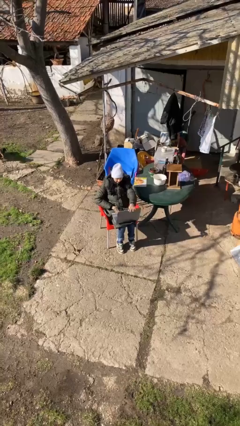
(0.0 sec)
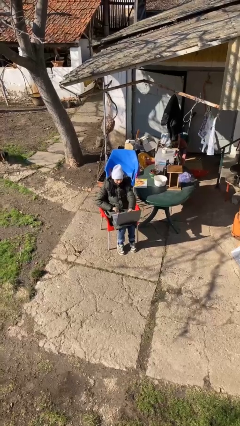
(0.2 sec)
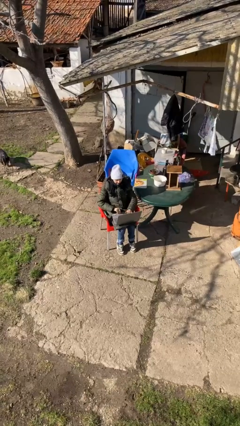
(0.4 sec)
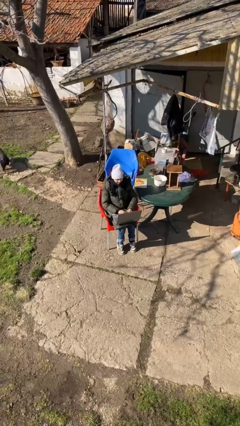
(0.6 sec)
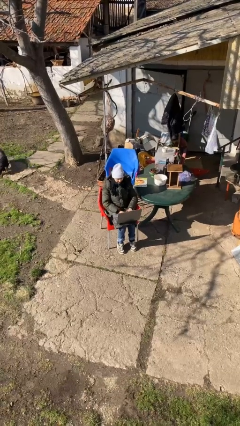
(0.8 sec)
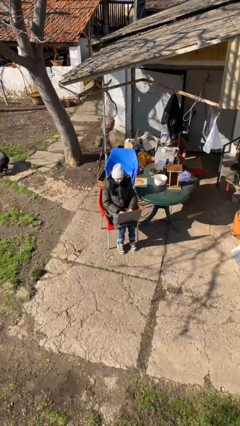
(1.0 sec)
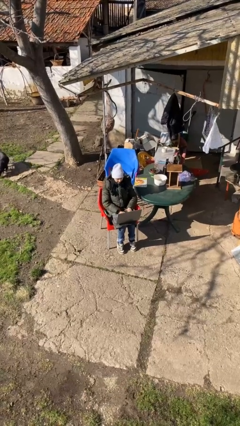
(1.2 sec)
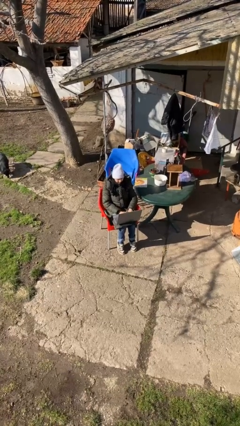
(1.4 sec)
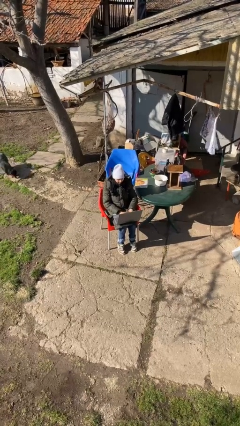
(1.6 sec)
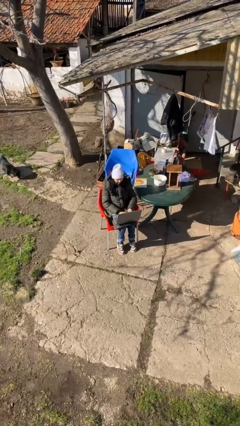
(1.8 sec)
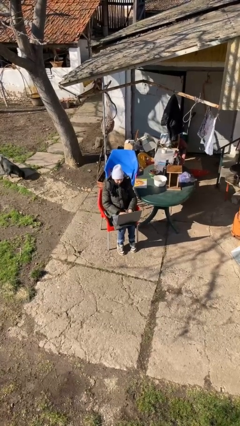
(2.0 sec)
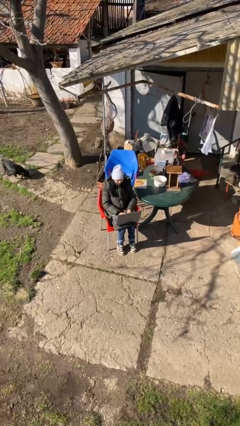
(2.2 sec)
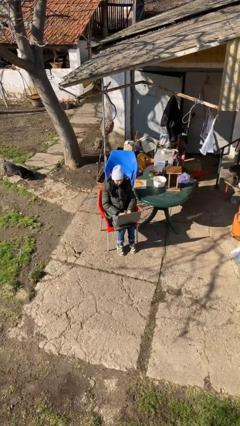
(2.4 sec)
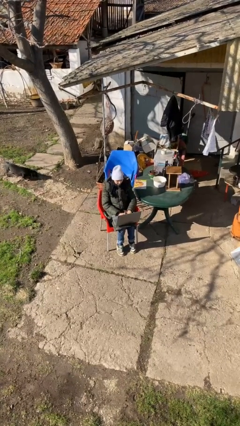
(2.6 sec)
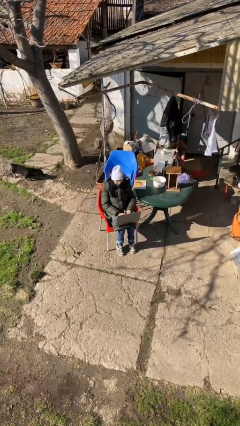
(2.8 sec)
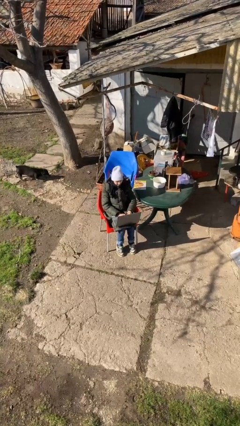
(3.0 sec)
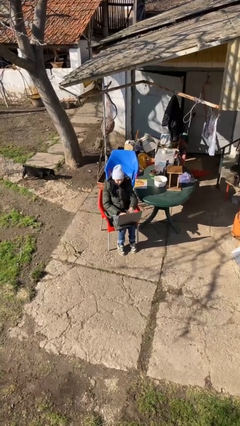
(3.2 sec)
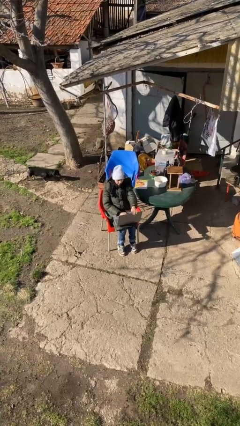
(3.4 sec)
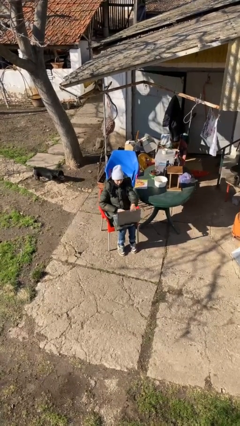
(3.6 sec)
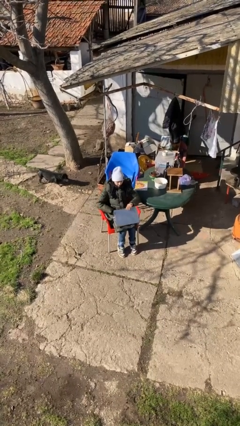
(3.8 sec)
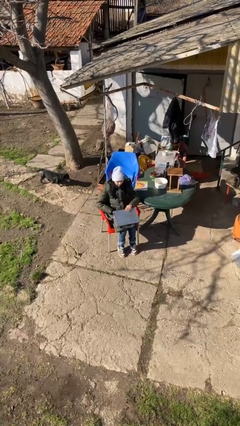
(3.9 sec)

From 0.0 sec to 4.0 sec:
person interacts with laptop

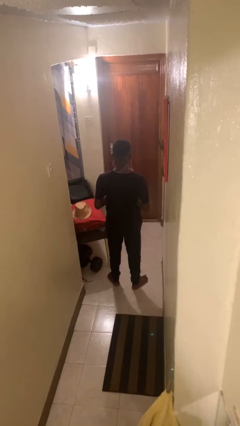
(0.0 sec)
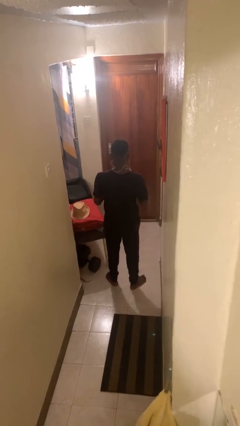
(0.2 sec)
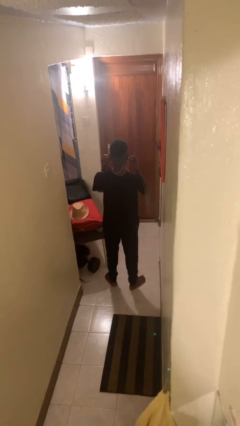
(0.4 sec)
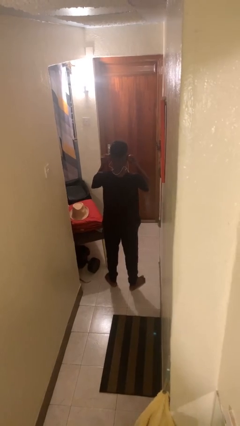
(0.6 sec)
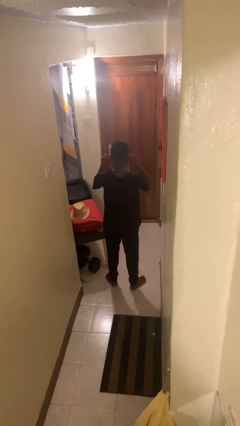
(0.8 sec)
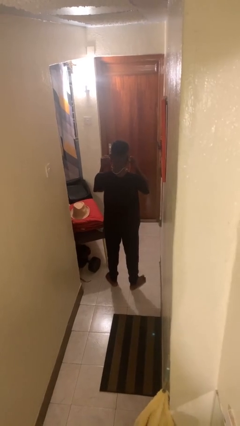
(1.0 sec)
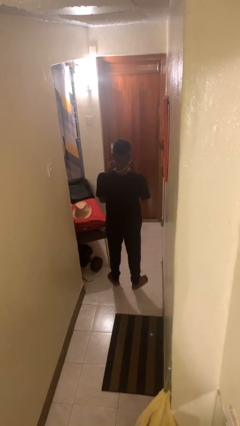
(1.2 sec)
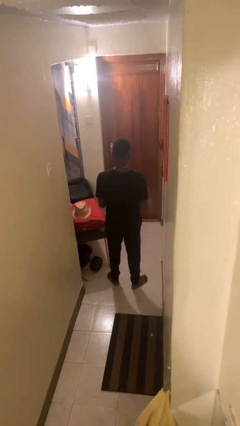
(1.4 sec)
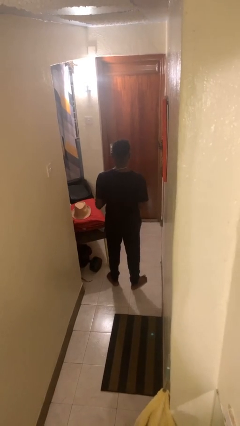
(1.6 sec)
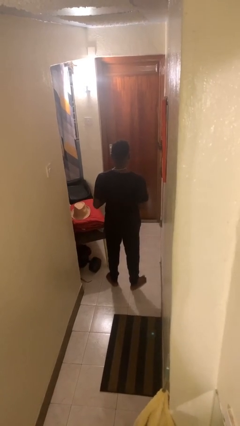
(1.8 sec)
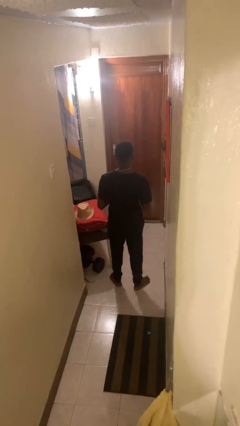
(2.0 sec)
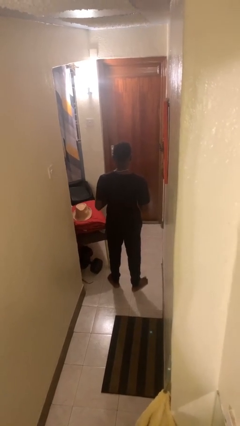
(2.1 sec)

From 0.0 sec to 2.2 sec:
person takes off headphones

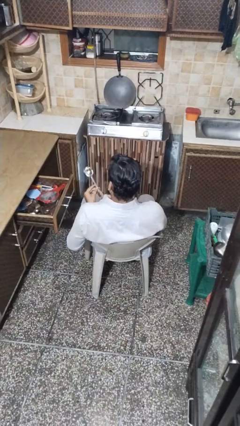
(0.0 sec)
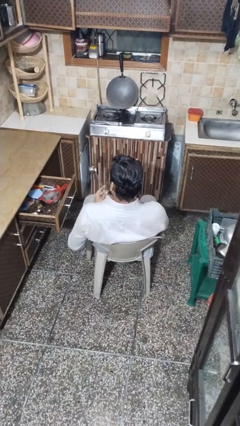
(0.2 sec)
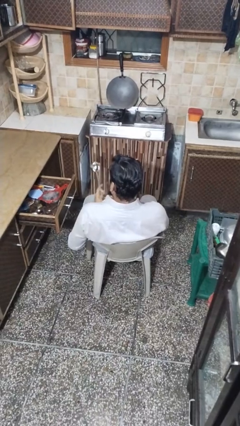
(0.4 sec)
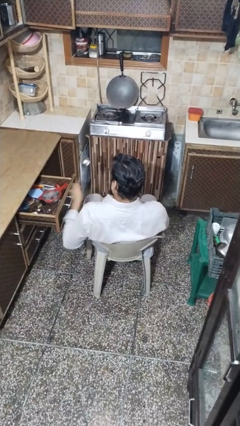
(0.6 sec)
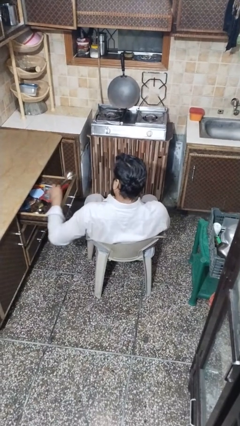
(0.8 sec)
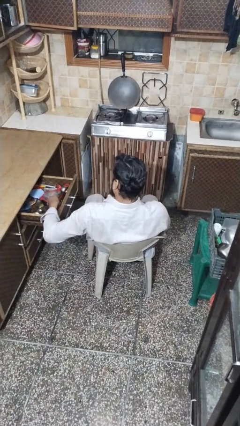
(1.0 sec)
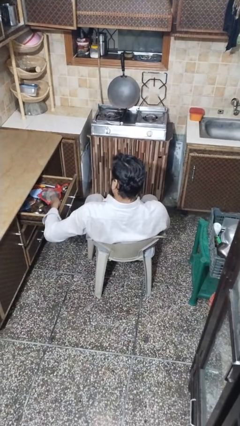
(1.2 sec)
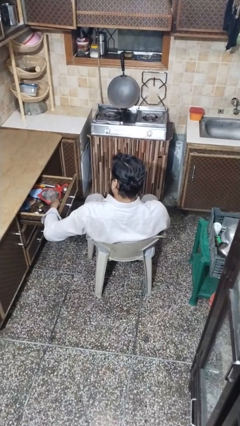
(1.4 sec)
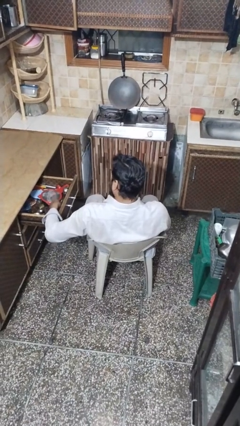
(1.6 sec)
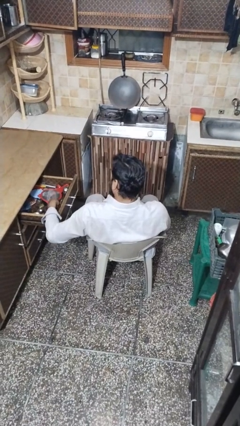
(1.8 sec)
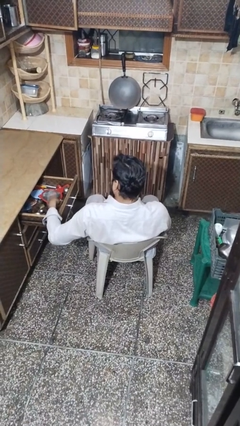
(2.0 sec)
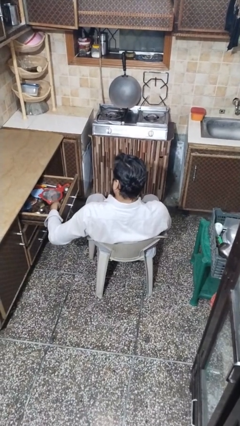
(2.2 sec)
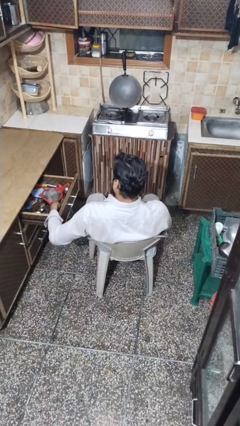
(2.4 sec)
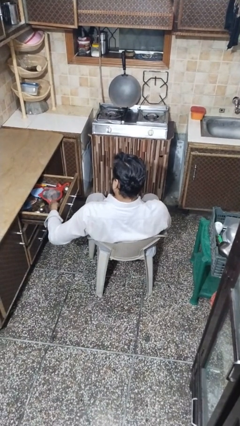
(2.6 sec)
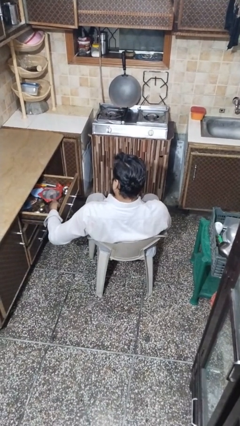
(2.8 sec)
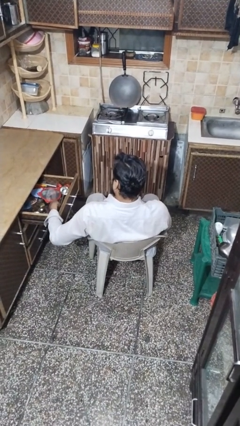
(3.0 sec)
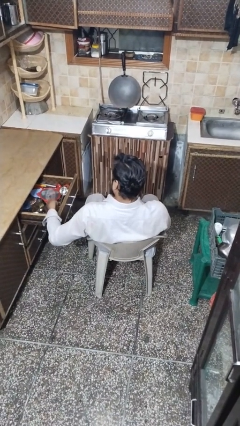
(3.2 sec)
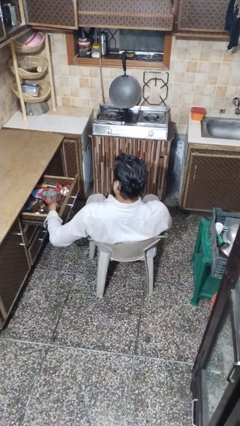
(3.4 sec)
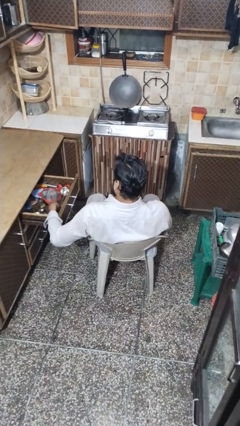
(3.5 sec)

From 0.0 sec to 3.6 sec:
person puts object into kitchen drawer

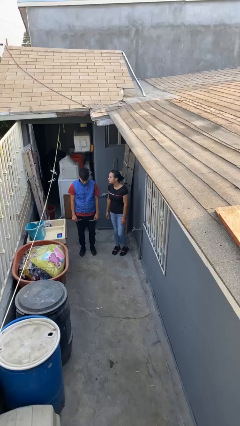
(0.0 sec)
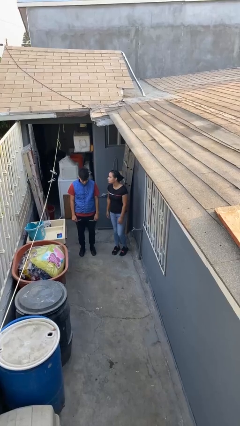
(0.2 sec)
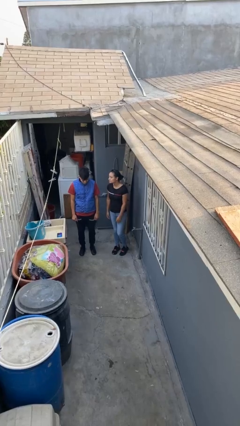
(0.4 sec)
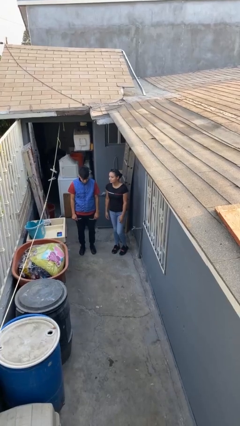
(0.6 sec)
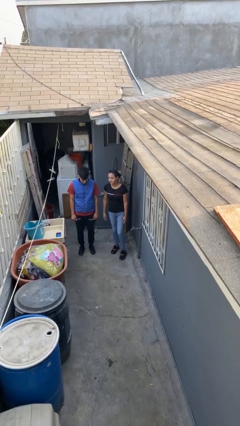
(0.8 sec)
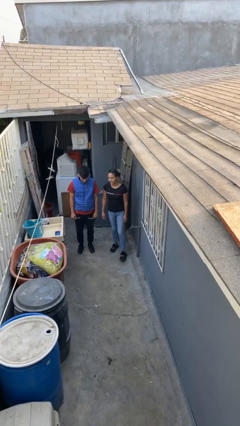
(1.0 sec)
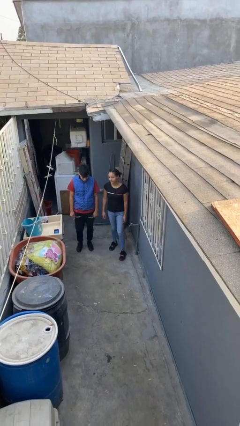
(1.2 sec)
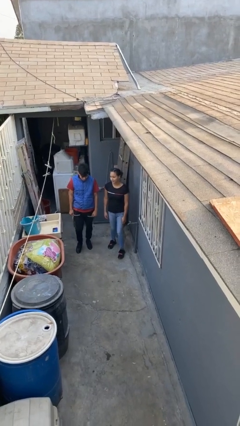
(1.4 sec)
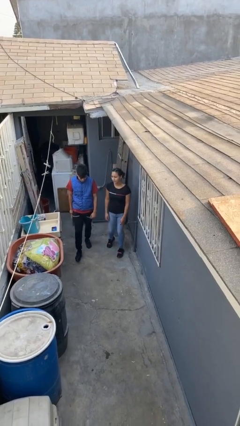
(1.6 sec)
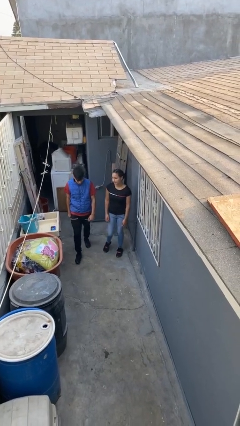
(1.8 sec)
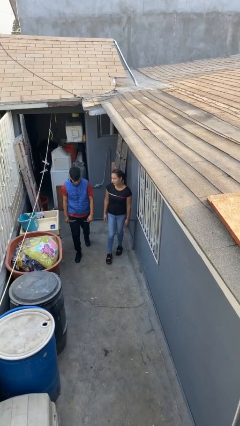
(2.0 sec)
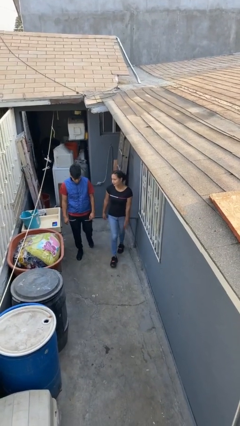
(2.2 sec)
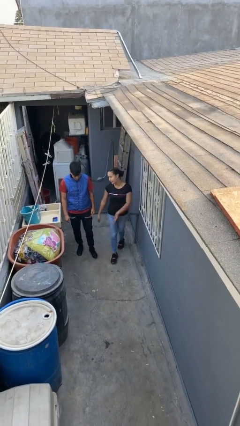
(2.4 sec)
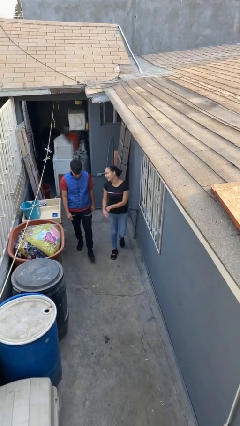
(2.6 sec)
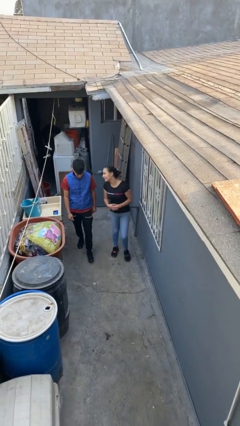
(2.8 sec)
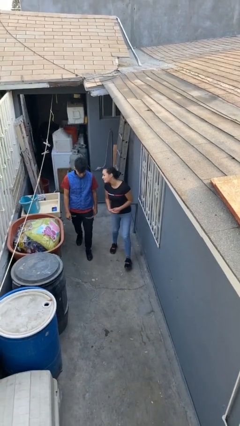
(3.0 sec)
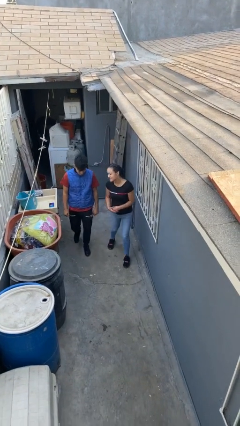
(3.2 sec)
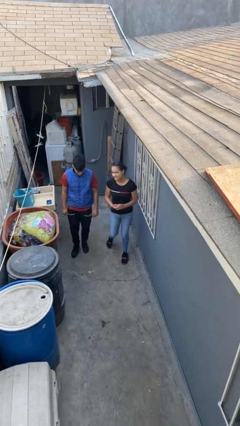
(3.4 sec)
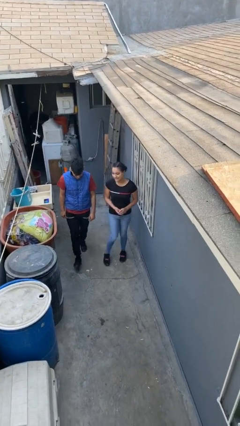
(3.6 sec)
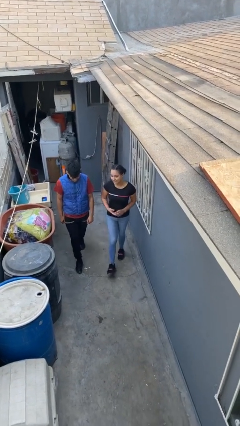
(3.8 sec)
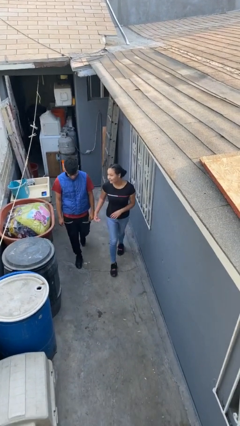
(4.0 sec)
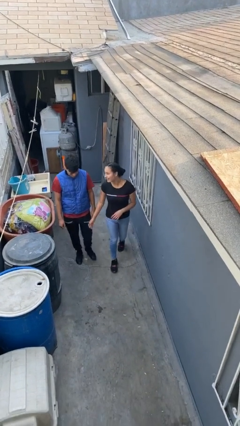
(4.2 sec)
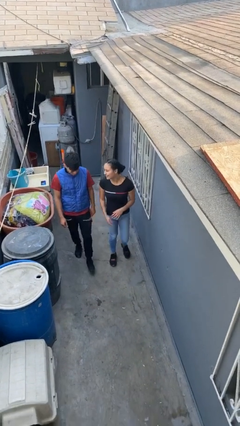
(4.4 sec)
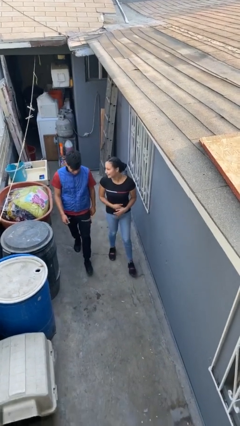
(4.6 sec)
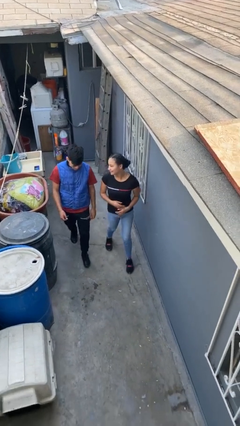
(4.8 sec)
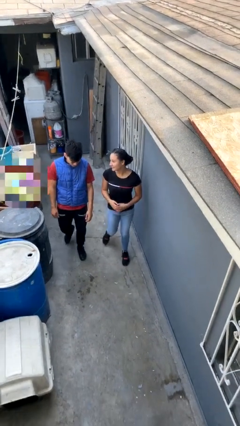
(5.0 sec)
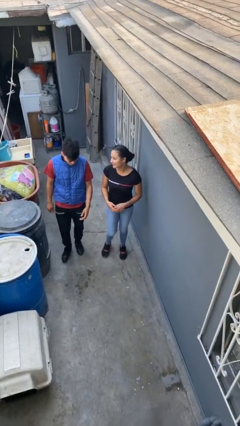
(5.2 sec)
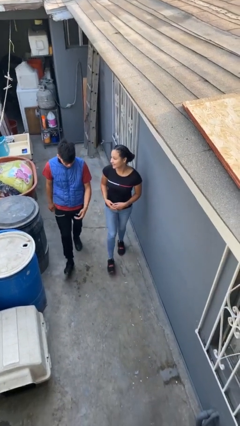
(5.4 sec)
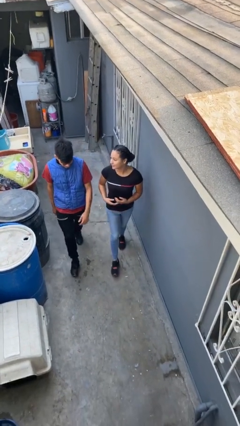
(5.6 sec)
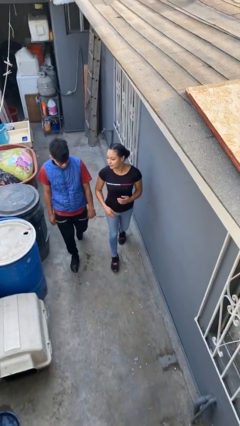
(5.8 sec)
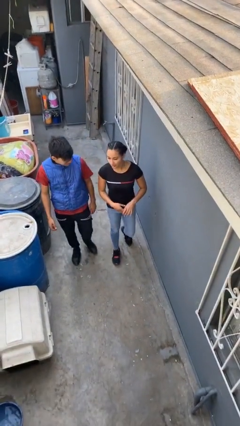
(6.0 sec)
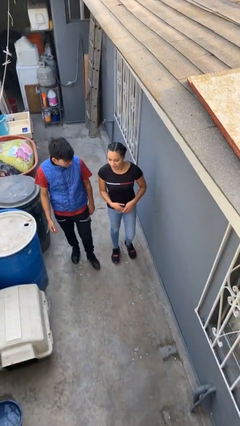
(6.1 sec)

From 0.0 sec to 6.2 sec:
person talks to person

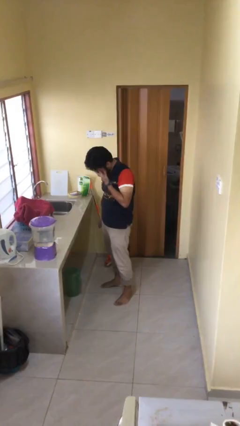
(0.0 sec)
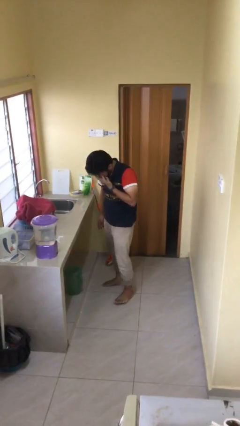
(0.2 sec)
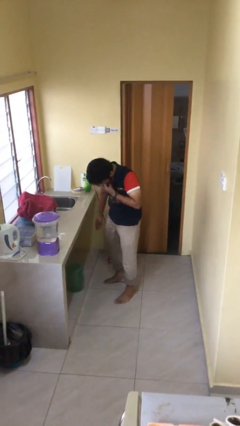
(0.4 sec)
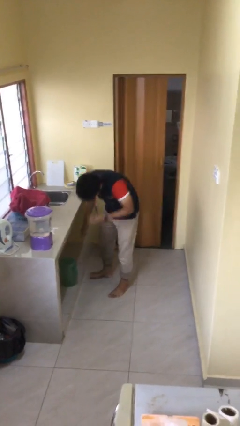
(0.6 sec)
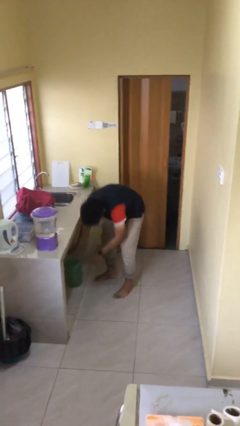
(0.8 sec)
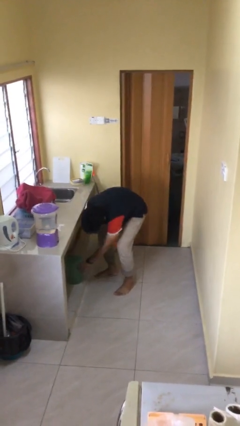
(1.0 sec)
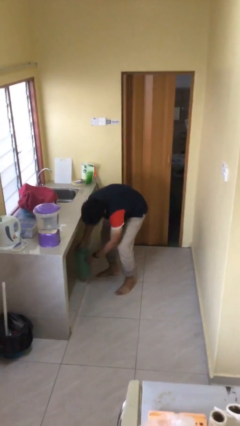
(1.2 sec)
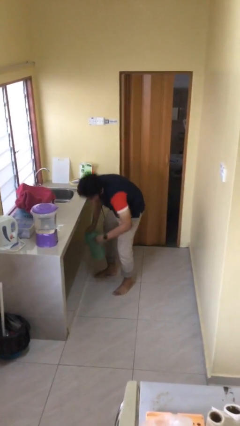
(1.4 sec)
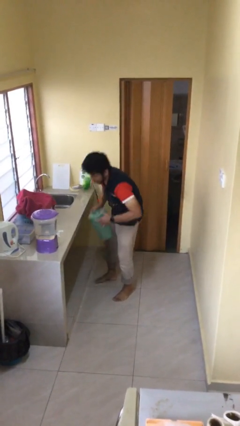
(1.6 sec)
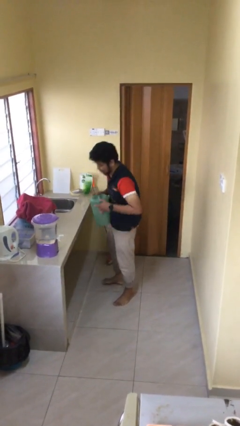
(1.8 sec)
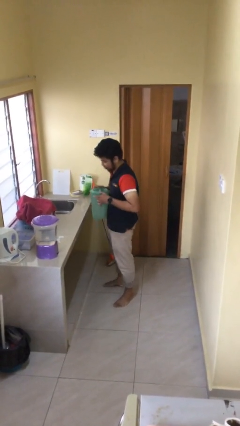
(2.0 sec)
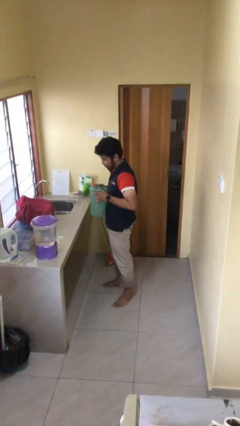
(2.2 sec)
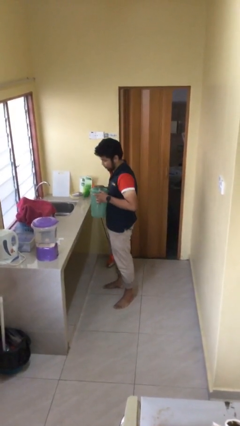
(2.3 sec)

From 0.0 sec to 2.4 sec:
person picks up object from cabinet
